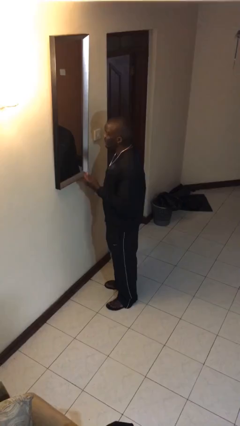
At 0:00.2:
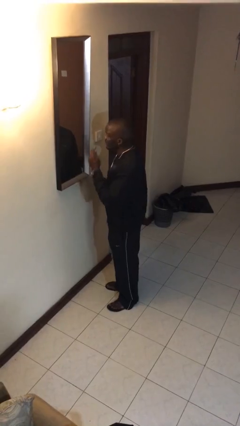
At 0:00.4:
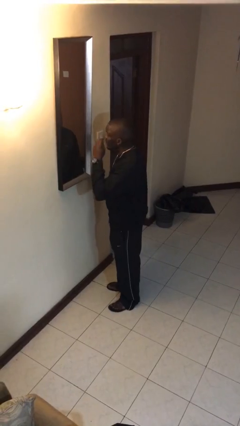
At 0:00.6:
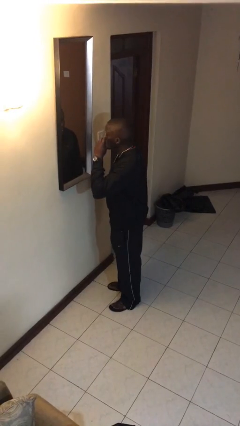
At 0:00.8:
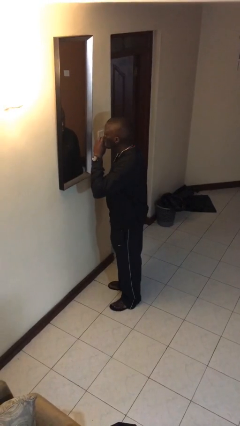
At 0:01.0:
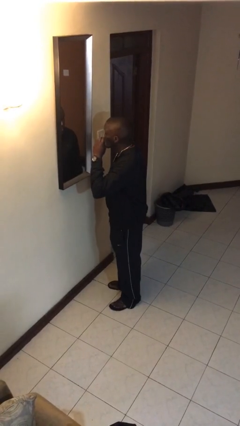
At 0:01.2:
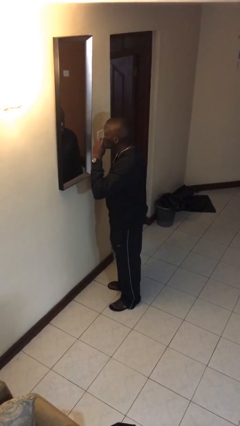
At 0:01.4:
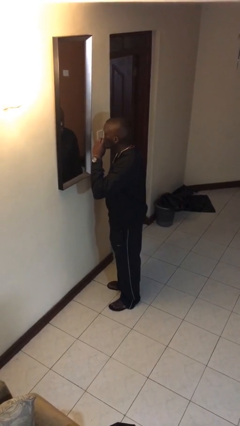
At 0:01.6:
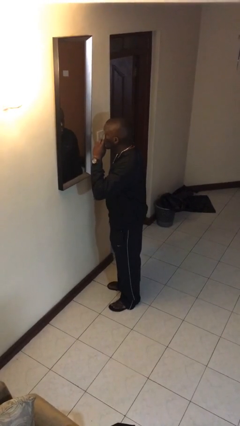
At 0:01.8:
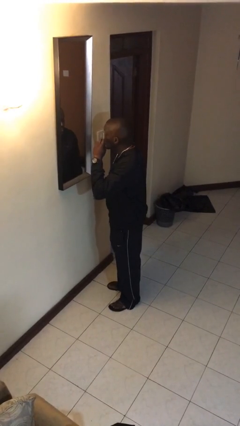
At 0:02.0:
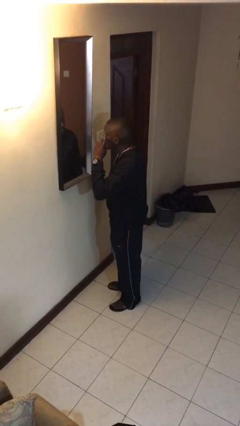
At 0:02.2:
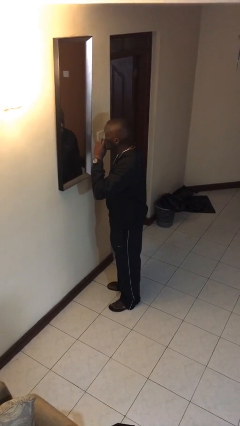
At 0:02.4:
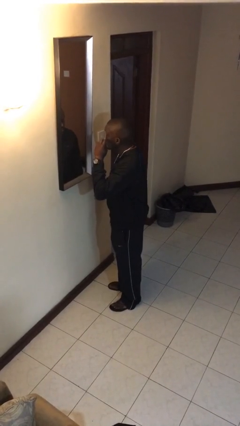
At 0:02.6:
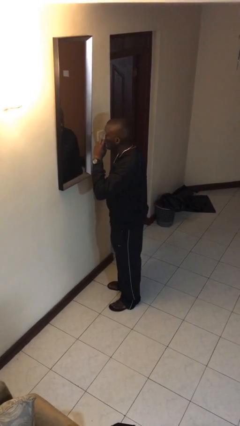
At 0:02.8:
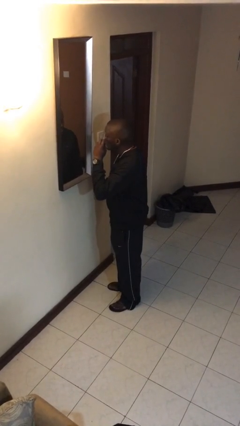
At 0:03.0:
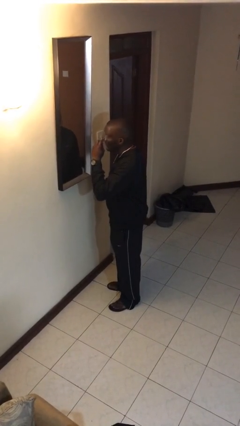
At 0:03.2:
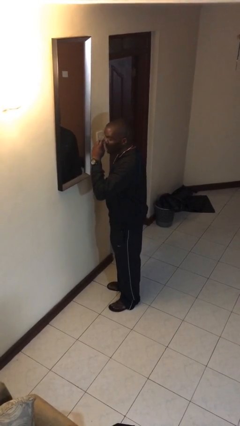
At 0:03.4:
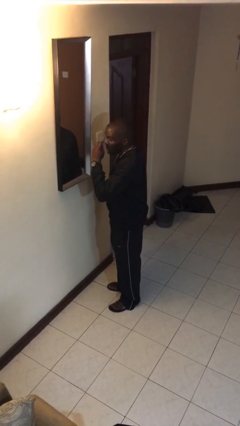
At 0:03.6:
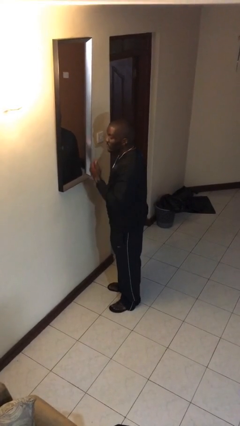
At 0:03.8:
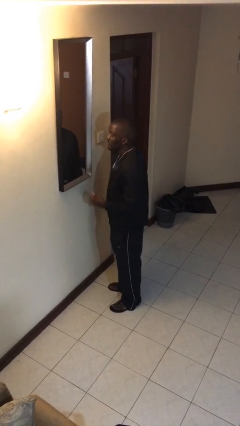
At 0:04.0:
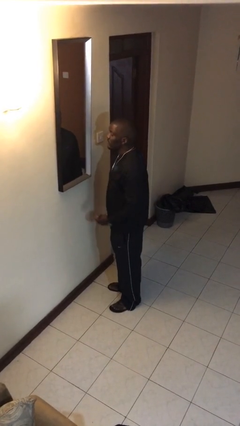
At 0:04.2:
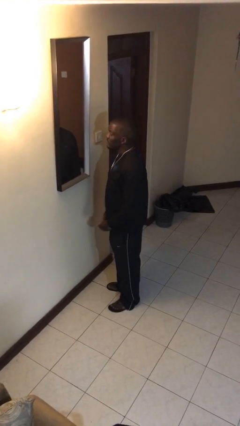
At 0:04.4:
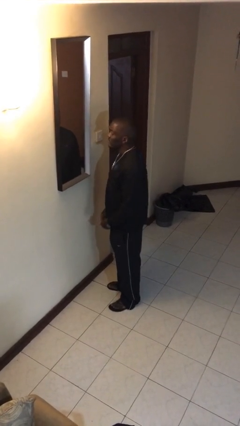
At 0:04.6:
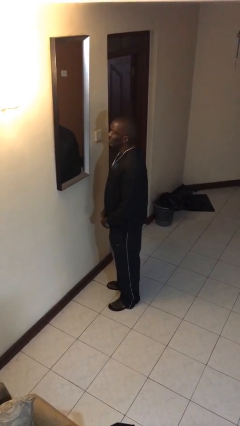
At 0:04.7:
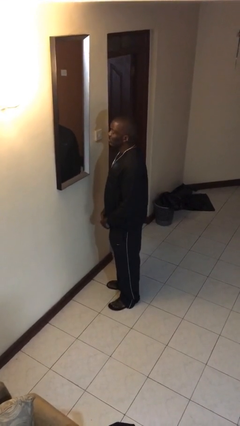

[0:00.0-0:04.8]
person applies eye makeup

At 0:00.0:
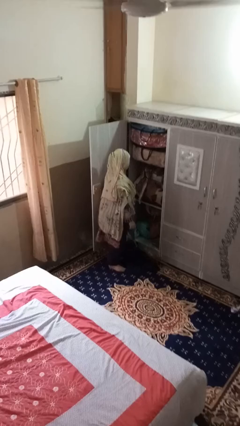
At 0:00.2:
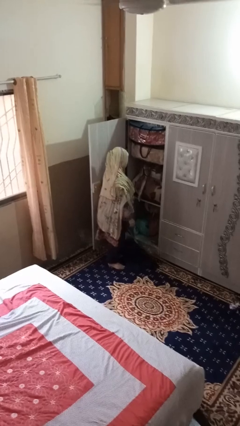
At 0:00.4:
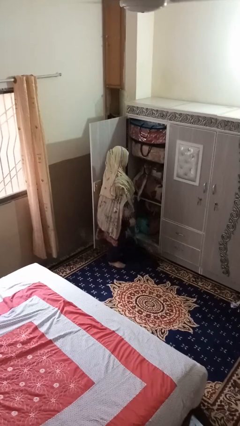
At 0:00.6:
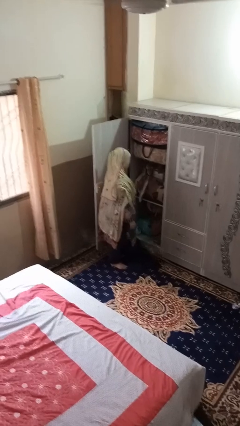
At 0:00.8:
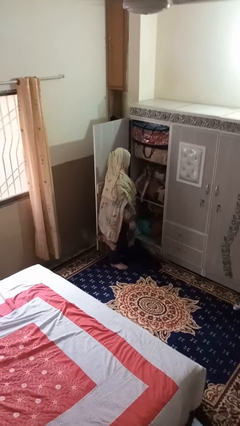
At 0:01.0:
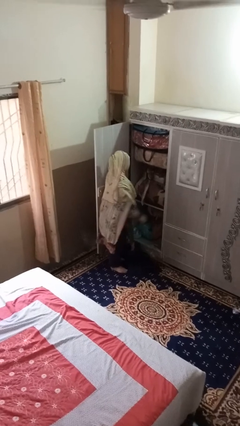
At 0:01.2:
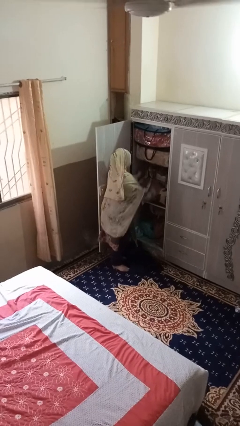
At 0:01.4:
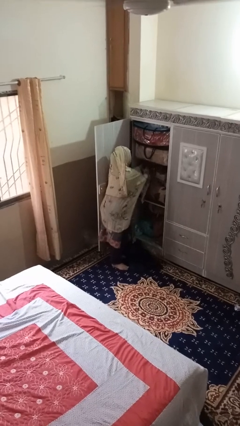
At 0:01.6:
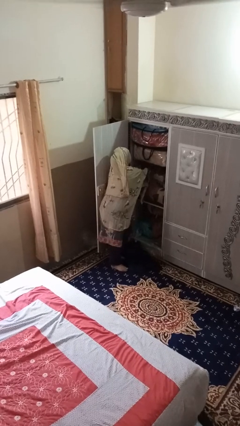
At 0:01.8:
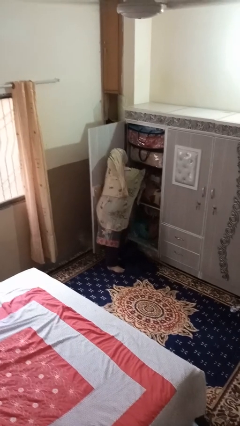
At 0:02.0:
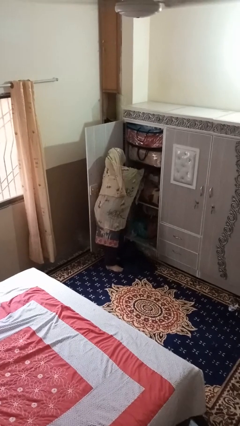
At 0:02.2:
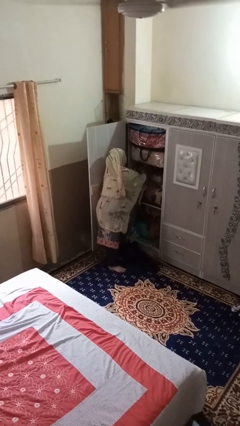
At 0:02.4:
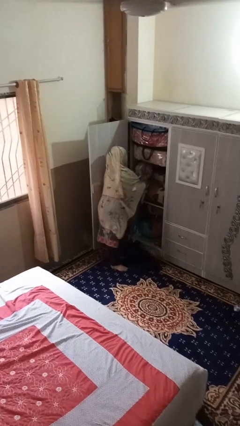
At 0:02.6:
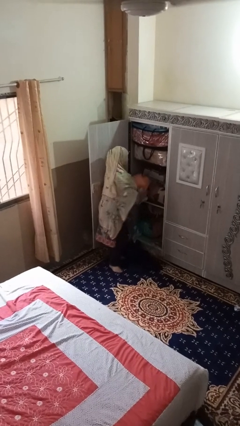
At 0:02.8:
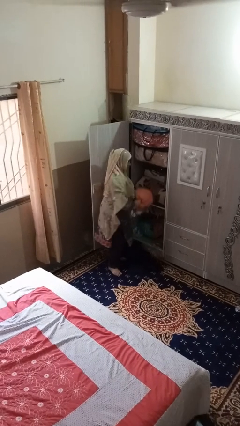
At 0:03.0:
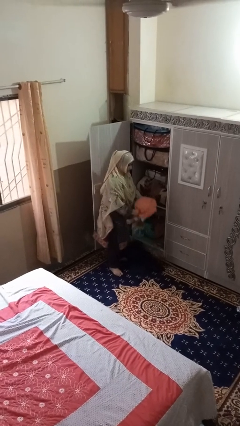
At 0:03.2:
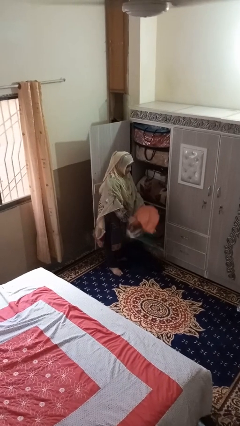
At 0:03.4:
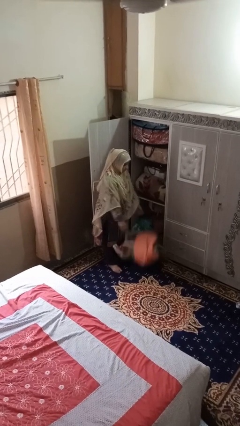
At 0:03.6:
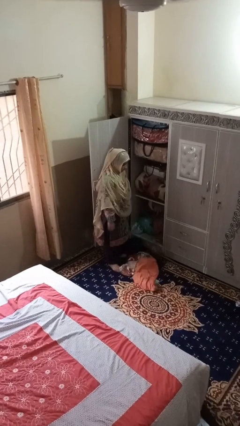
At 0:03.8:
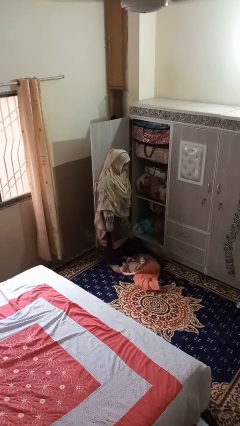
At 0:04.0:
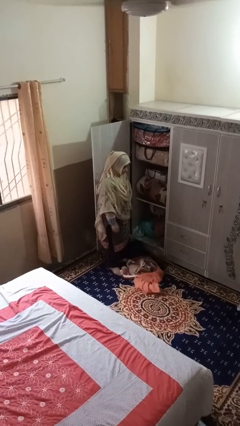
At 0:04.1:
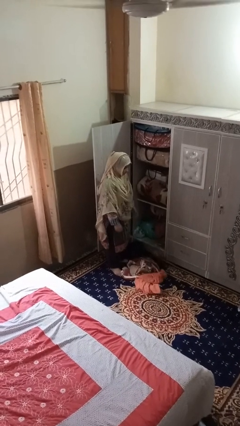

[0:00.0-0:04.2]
person puts clothes into dresser

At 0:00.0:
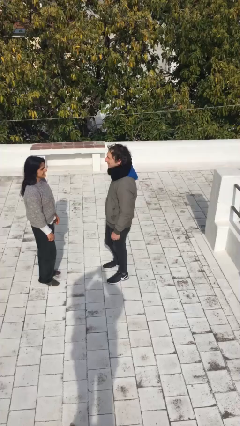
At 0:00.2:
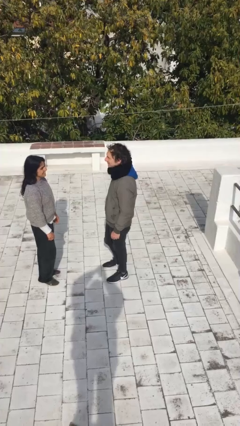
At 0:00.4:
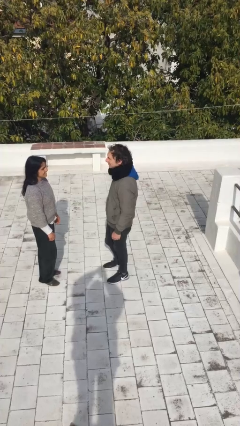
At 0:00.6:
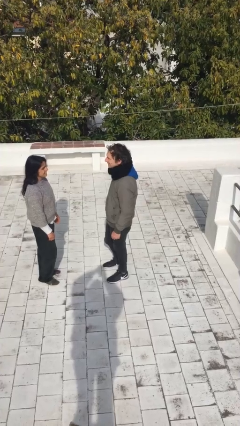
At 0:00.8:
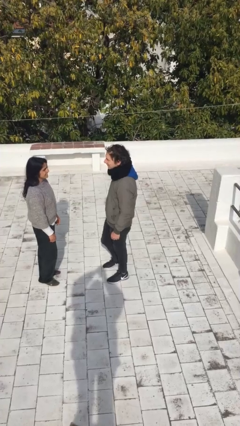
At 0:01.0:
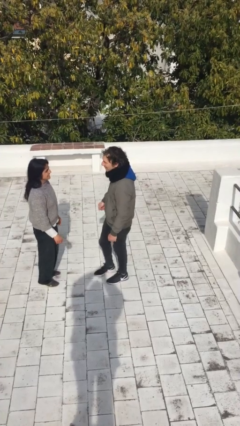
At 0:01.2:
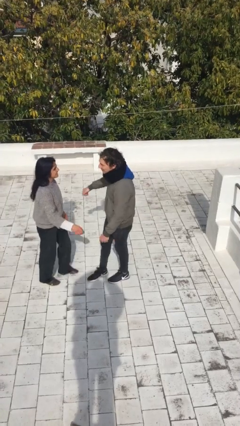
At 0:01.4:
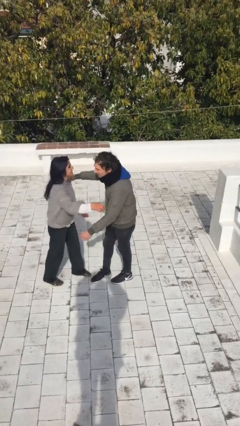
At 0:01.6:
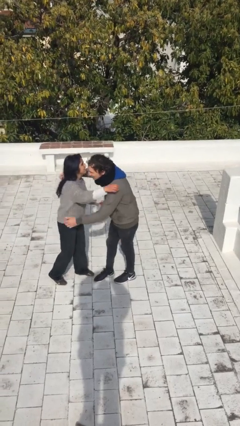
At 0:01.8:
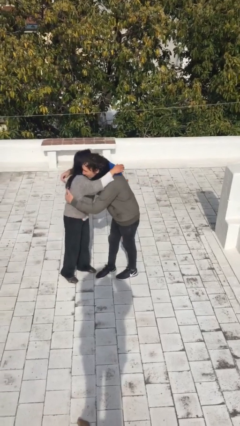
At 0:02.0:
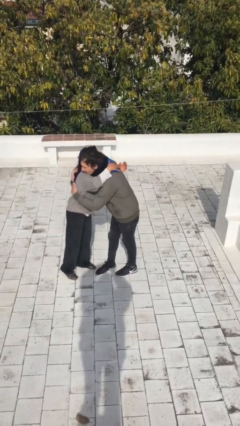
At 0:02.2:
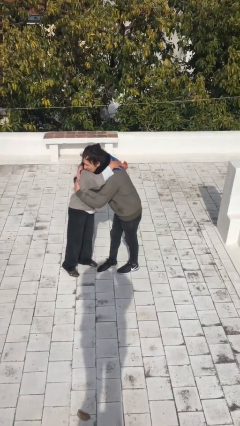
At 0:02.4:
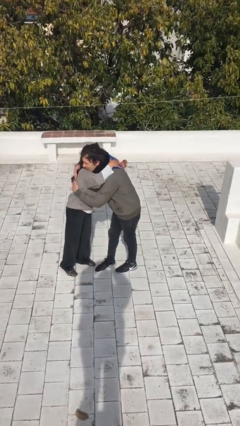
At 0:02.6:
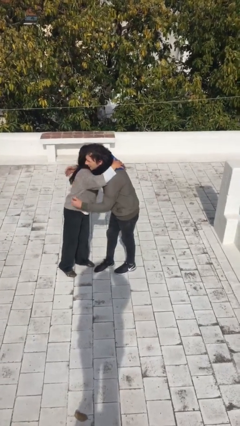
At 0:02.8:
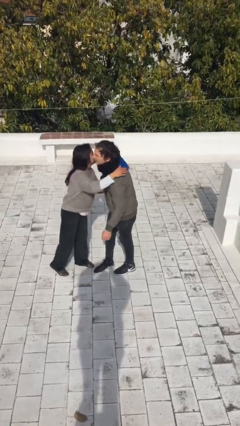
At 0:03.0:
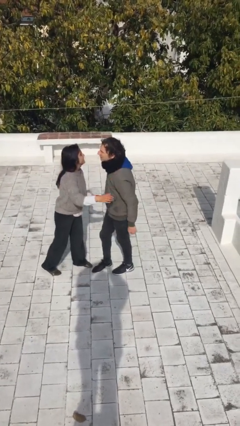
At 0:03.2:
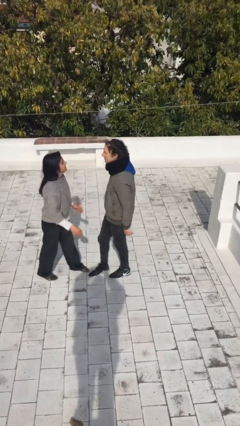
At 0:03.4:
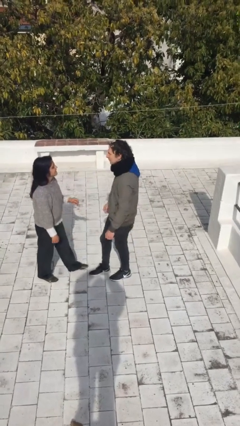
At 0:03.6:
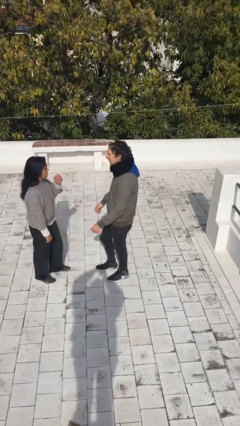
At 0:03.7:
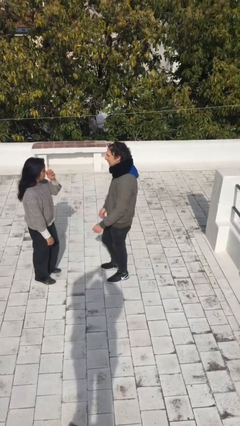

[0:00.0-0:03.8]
person embraces person

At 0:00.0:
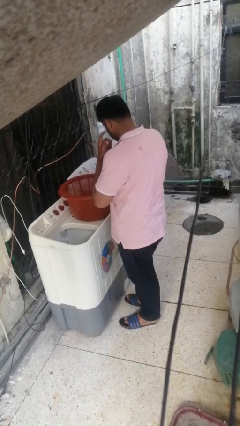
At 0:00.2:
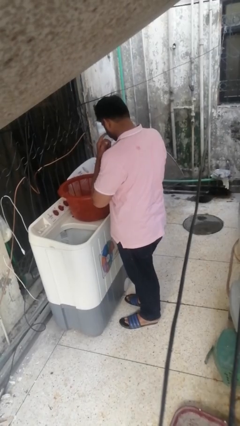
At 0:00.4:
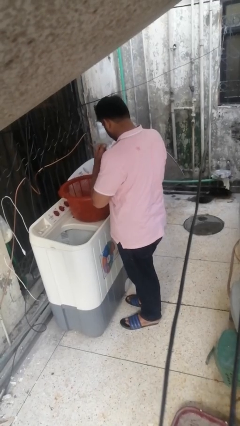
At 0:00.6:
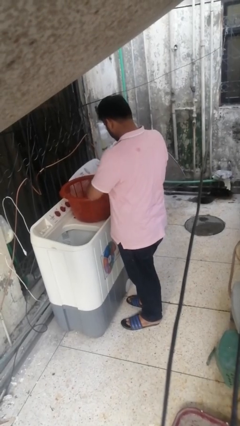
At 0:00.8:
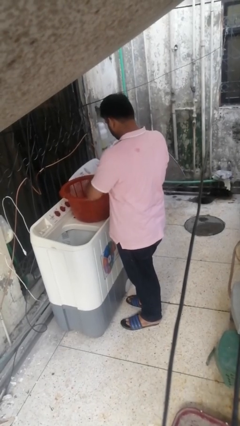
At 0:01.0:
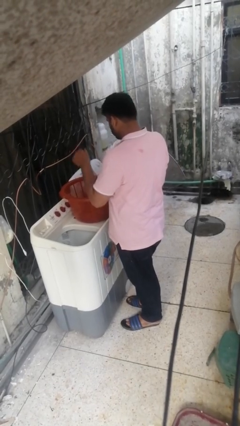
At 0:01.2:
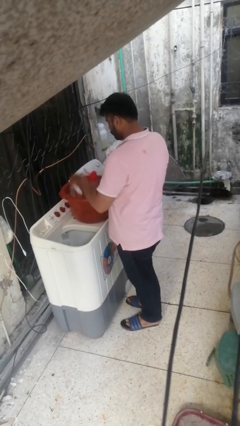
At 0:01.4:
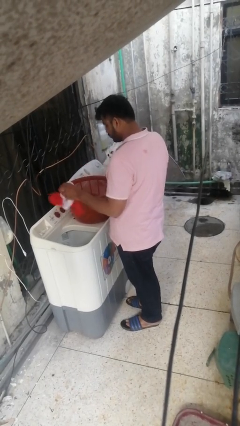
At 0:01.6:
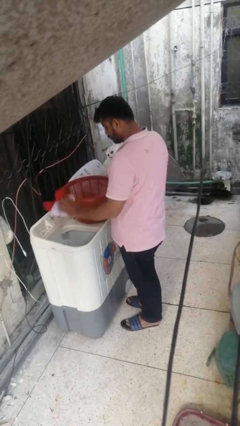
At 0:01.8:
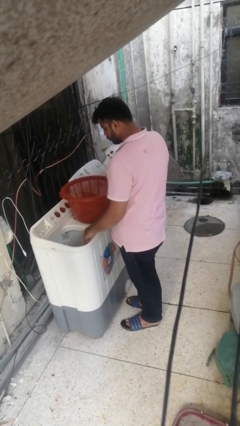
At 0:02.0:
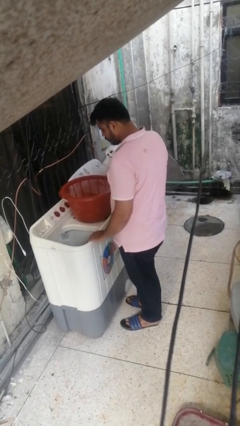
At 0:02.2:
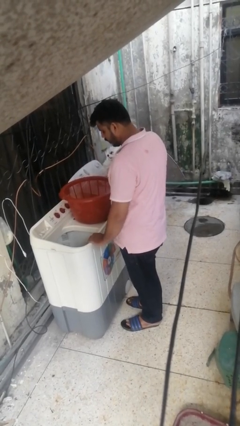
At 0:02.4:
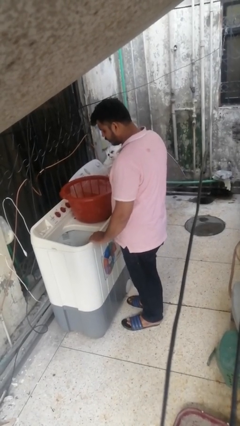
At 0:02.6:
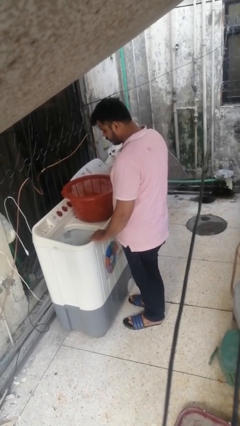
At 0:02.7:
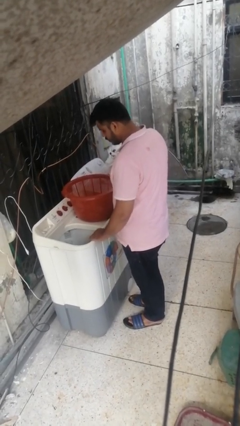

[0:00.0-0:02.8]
person loads clotheswasher

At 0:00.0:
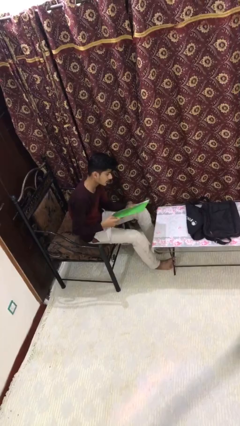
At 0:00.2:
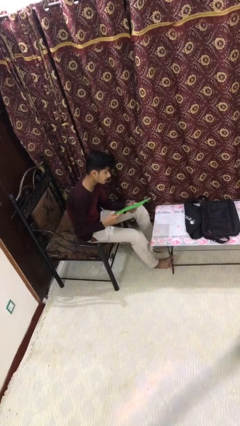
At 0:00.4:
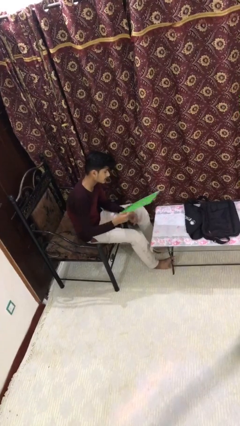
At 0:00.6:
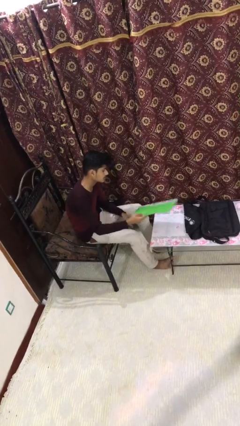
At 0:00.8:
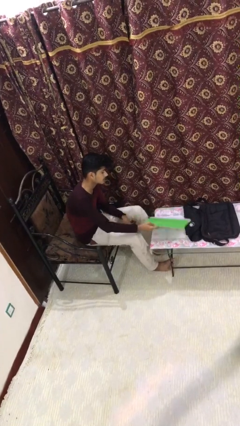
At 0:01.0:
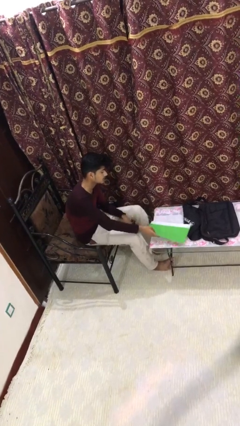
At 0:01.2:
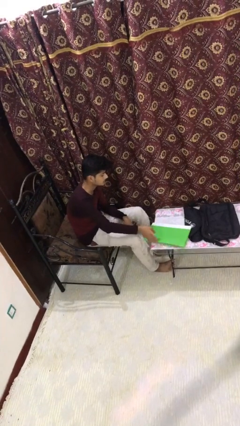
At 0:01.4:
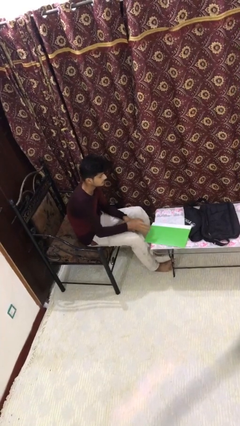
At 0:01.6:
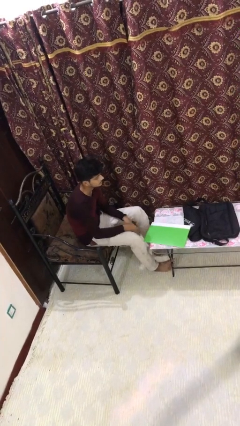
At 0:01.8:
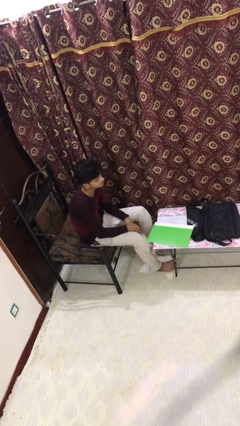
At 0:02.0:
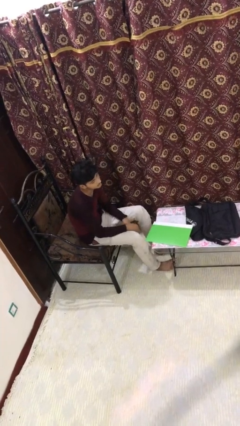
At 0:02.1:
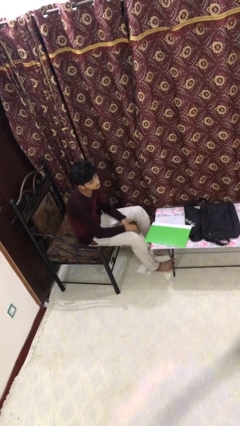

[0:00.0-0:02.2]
person puts down object on table
